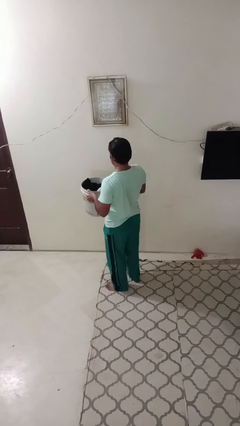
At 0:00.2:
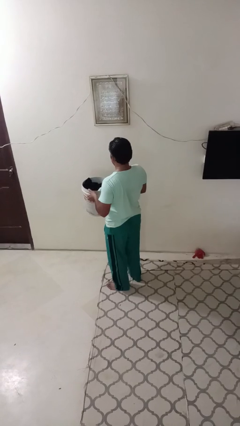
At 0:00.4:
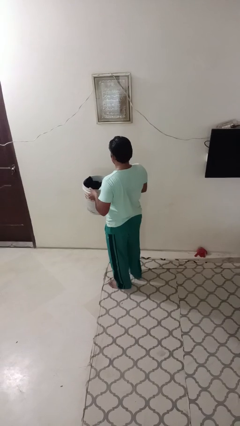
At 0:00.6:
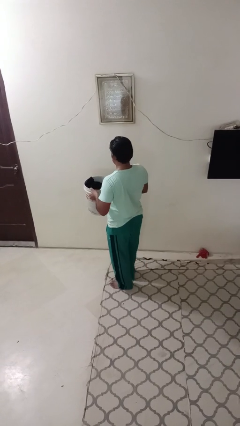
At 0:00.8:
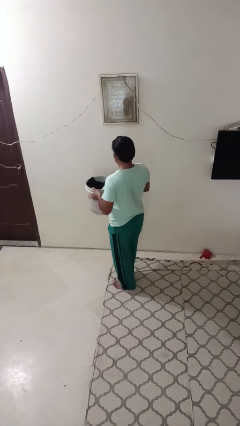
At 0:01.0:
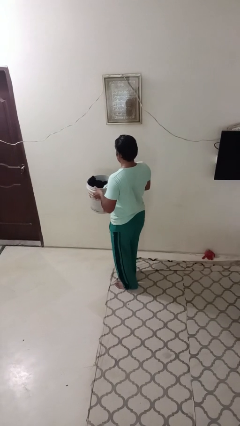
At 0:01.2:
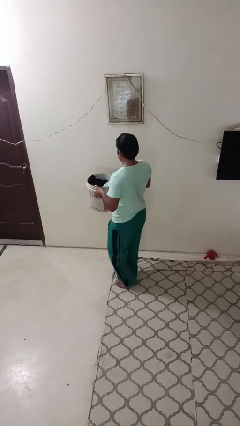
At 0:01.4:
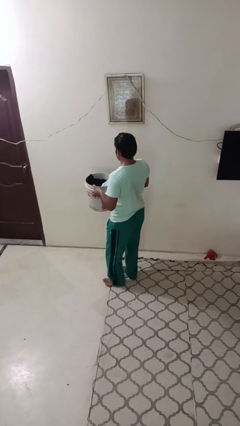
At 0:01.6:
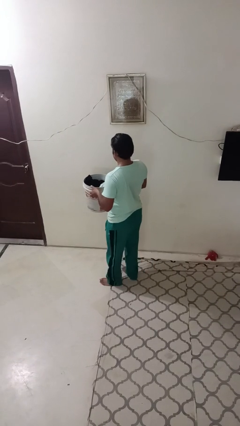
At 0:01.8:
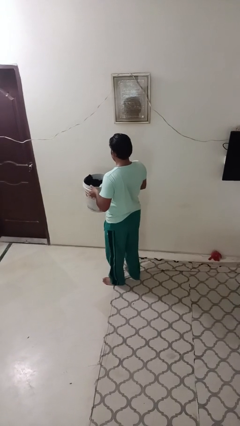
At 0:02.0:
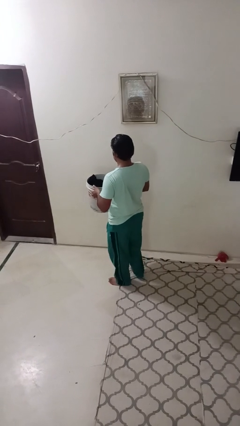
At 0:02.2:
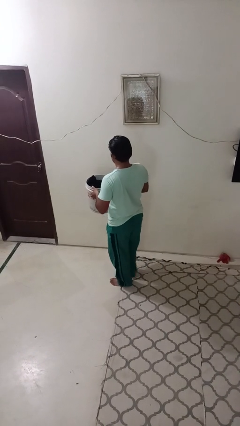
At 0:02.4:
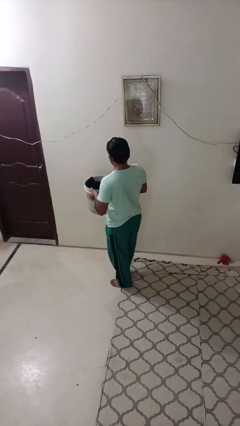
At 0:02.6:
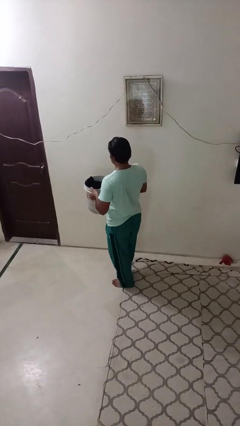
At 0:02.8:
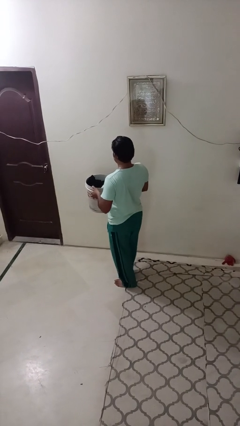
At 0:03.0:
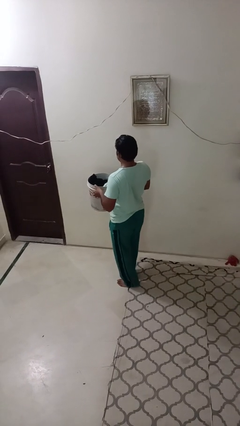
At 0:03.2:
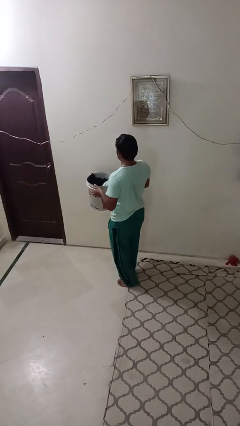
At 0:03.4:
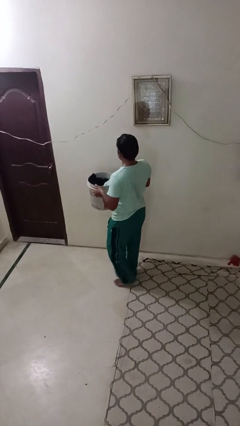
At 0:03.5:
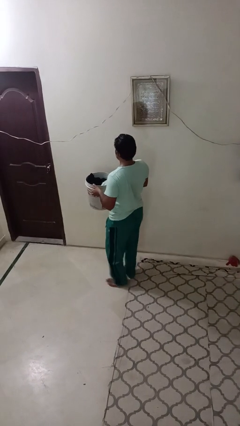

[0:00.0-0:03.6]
person carries laundry basket

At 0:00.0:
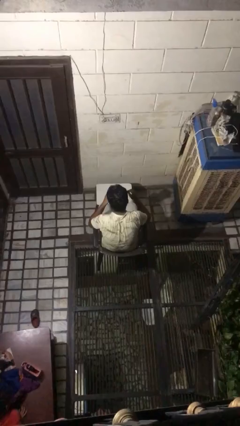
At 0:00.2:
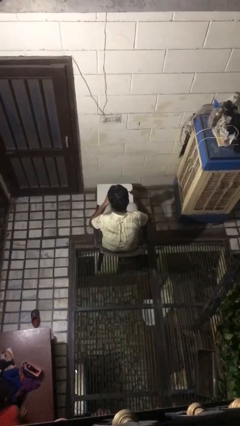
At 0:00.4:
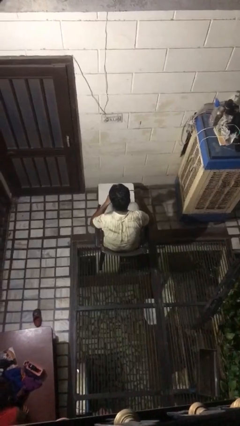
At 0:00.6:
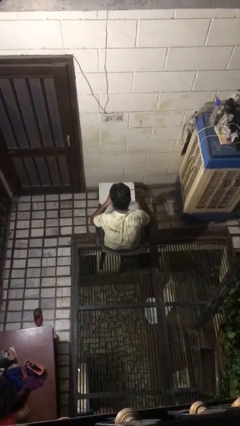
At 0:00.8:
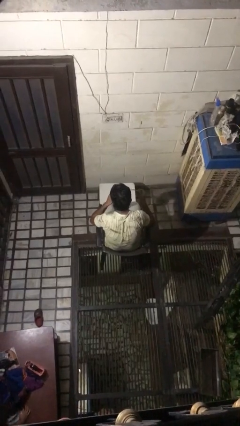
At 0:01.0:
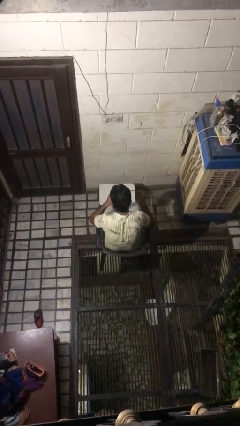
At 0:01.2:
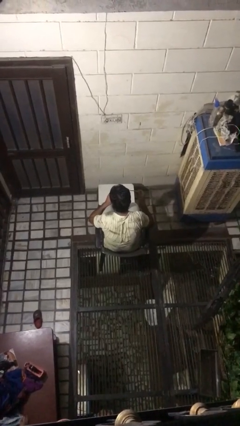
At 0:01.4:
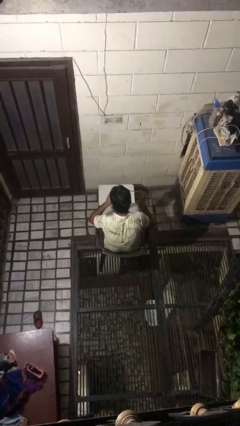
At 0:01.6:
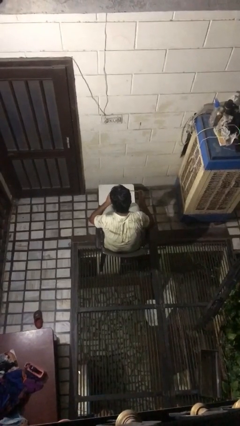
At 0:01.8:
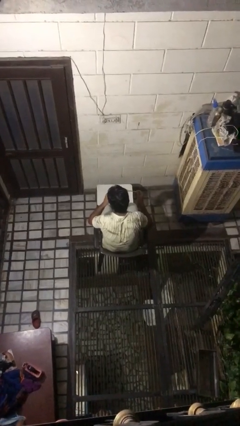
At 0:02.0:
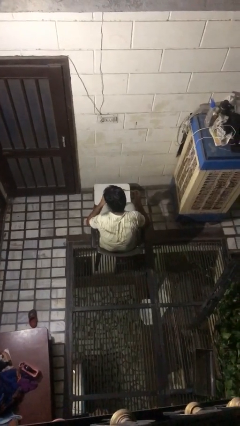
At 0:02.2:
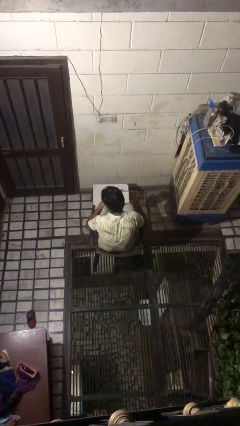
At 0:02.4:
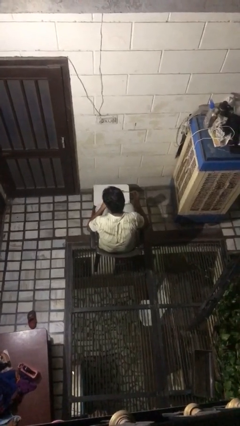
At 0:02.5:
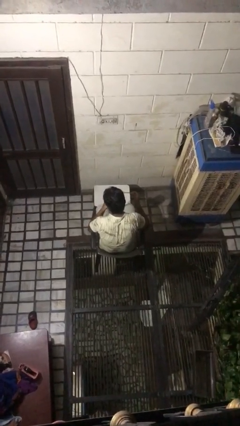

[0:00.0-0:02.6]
person drinks from mug

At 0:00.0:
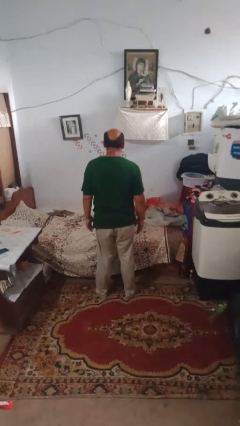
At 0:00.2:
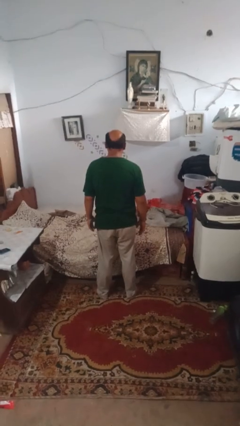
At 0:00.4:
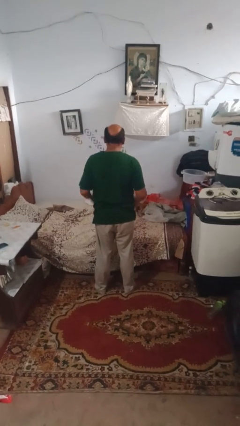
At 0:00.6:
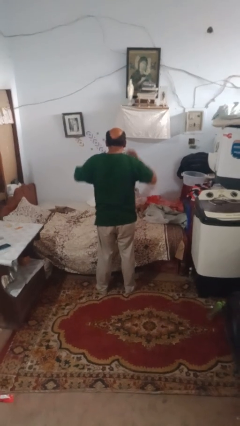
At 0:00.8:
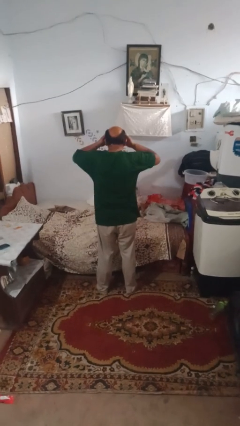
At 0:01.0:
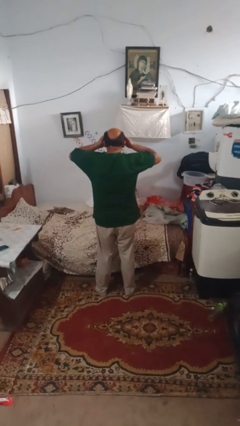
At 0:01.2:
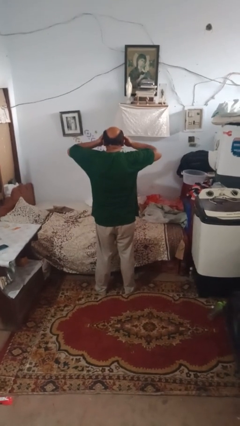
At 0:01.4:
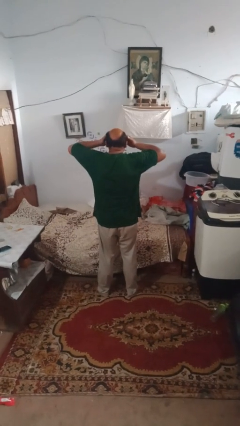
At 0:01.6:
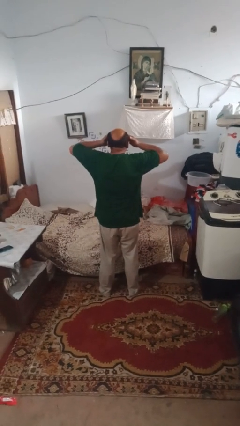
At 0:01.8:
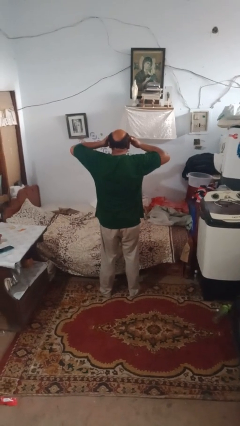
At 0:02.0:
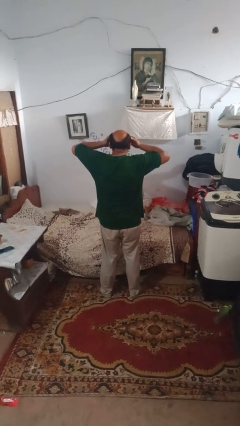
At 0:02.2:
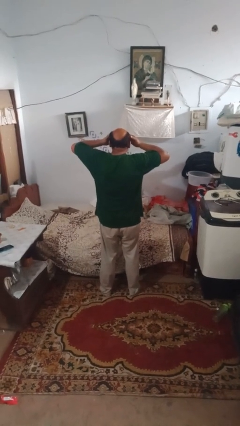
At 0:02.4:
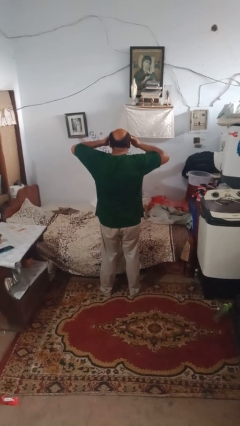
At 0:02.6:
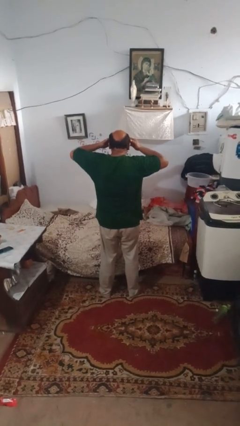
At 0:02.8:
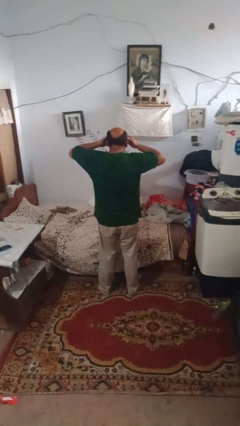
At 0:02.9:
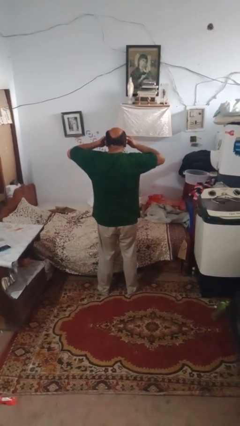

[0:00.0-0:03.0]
person rubs eyes

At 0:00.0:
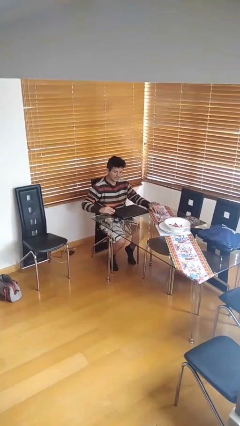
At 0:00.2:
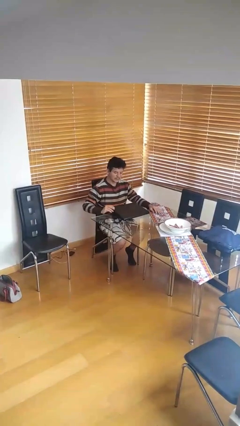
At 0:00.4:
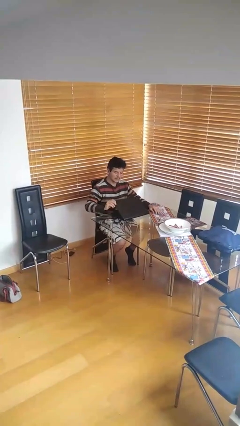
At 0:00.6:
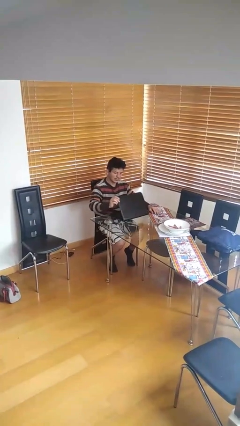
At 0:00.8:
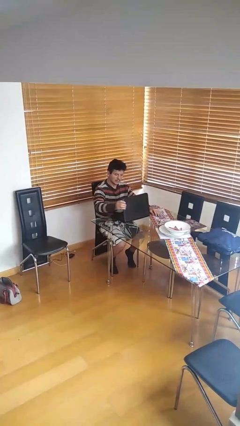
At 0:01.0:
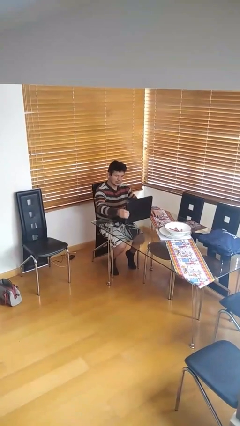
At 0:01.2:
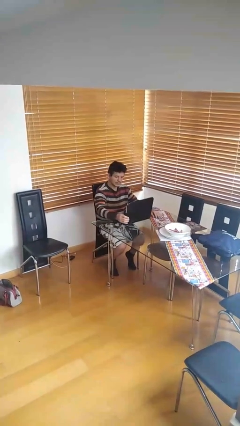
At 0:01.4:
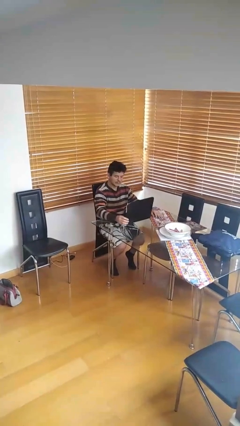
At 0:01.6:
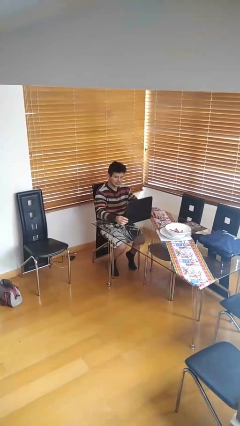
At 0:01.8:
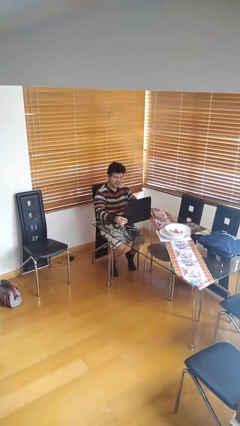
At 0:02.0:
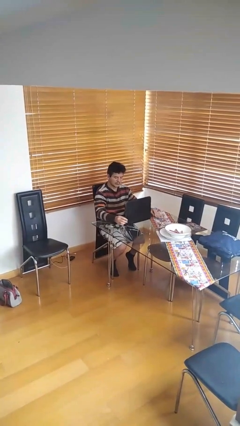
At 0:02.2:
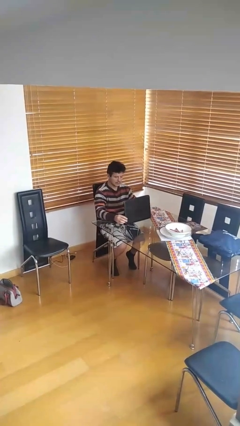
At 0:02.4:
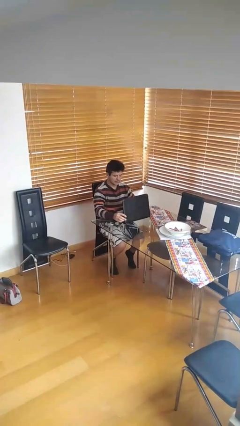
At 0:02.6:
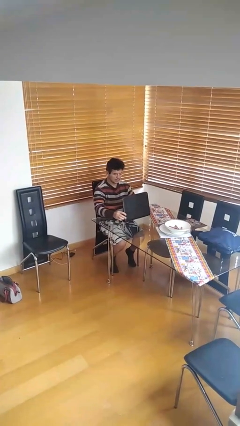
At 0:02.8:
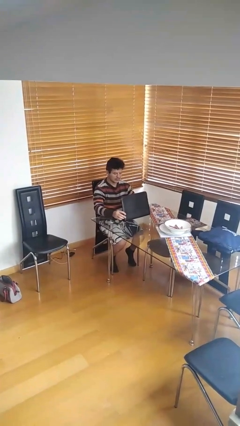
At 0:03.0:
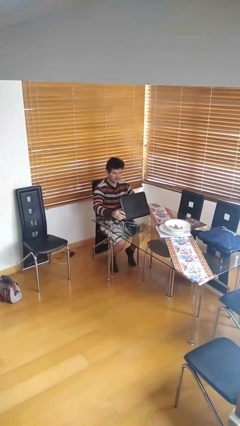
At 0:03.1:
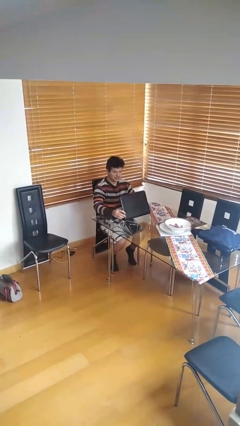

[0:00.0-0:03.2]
person interacts with laptop

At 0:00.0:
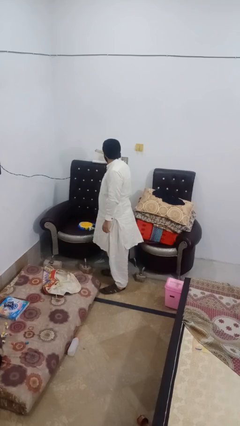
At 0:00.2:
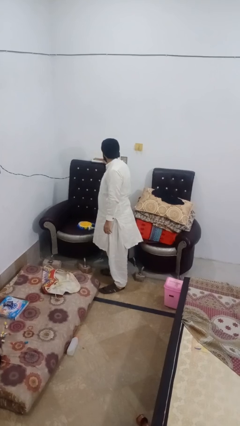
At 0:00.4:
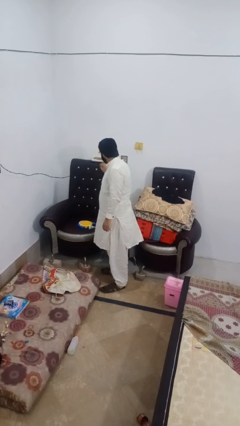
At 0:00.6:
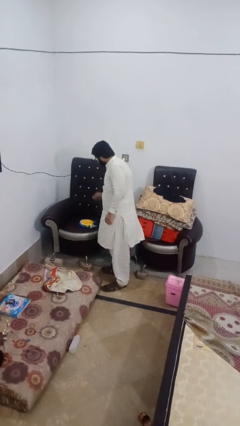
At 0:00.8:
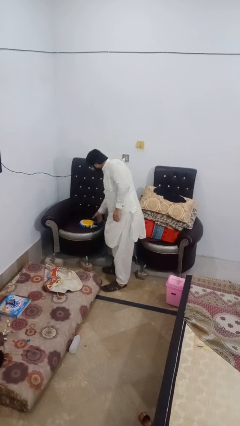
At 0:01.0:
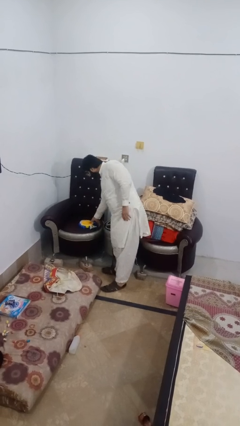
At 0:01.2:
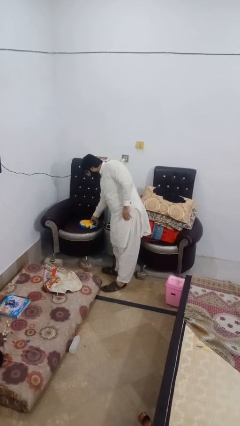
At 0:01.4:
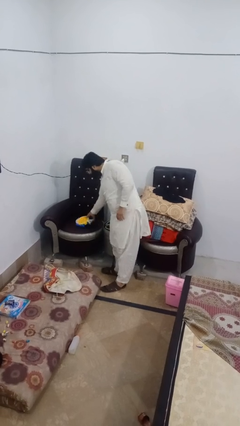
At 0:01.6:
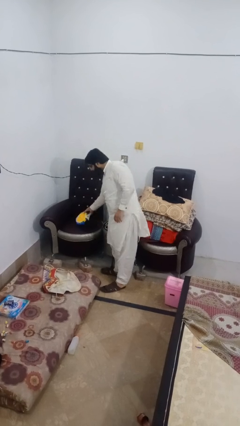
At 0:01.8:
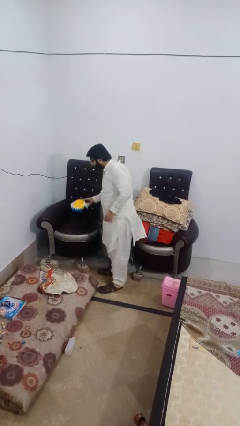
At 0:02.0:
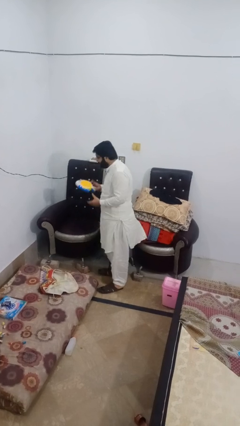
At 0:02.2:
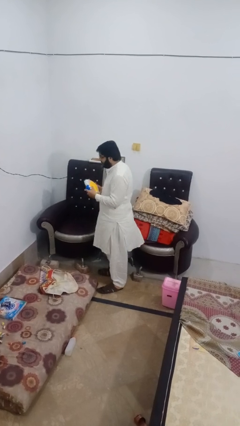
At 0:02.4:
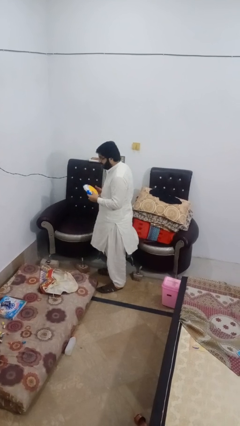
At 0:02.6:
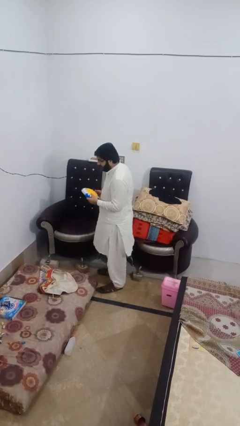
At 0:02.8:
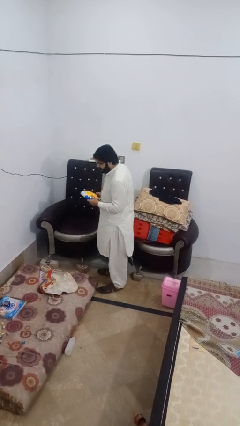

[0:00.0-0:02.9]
person picks up object from couch

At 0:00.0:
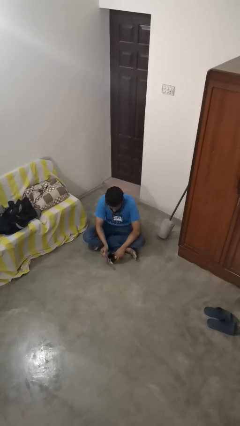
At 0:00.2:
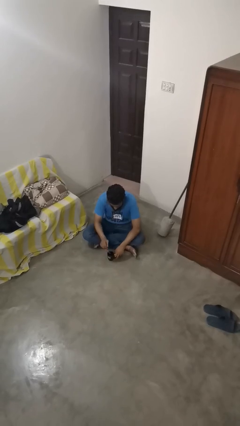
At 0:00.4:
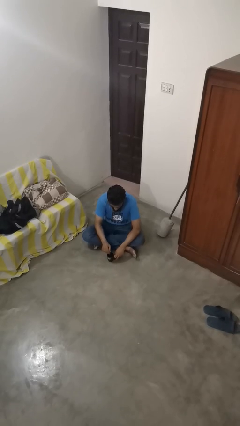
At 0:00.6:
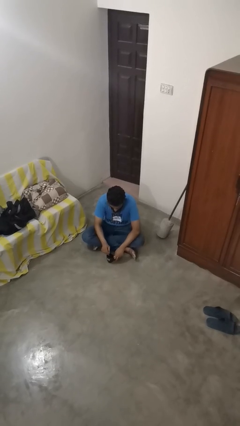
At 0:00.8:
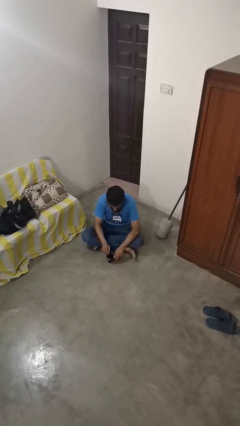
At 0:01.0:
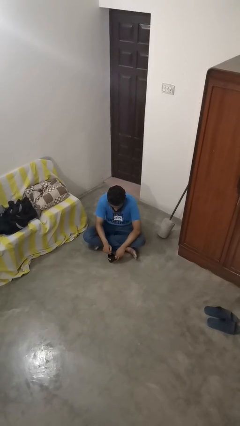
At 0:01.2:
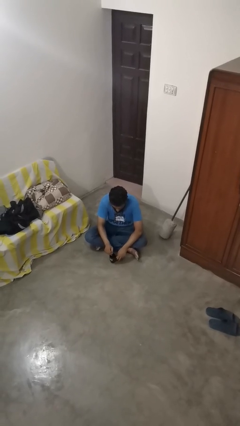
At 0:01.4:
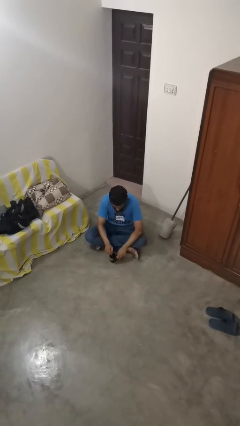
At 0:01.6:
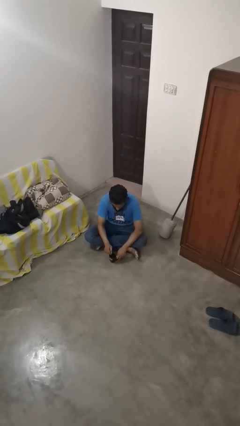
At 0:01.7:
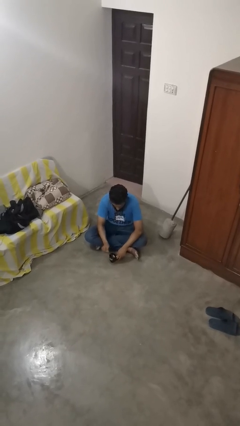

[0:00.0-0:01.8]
person stirs mug

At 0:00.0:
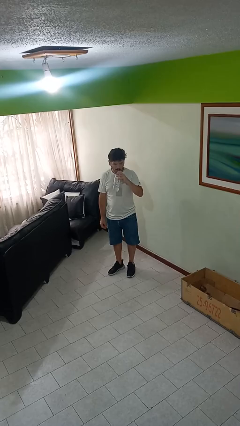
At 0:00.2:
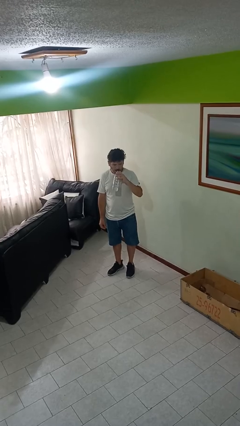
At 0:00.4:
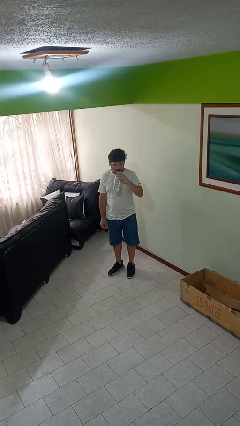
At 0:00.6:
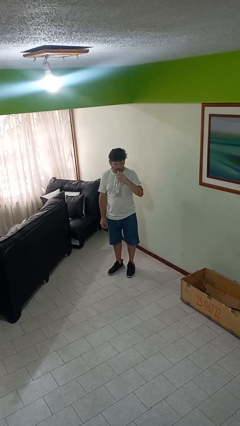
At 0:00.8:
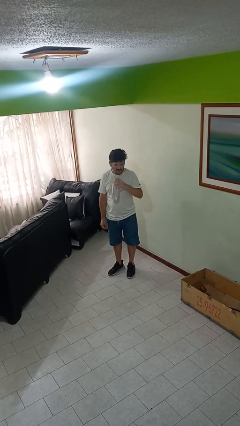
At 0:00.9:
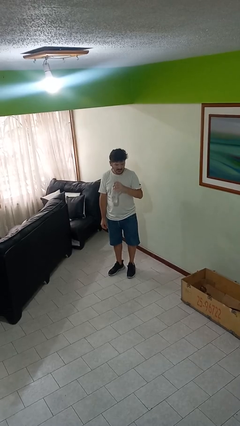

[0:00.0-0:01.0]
person drinks from straw
